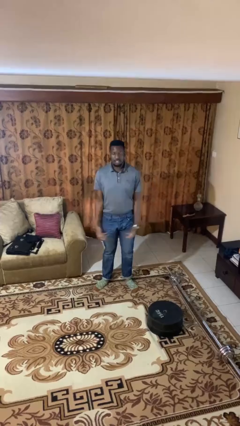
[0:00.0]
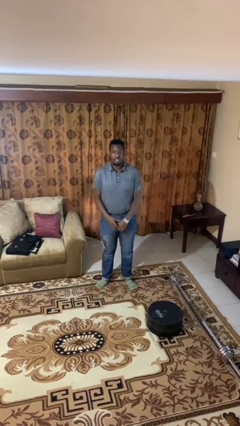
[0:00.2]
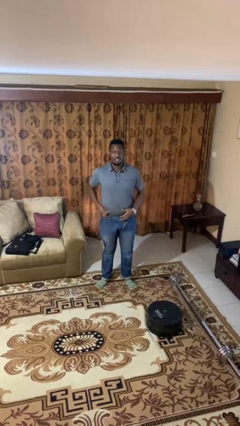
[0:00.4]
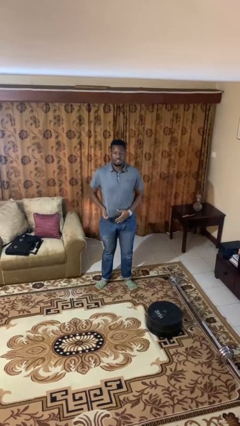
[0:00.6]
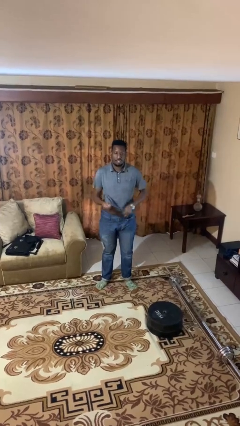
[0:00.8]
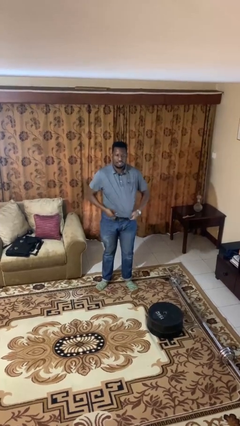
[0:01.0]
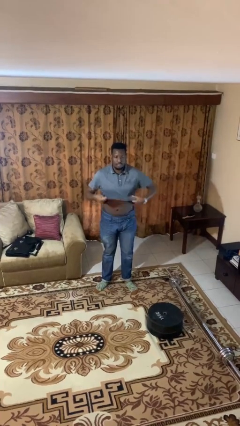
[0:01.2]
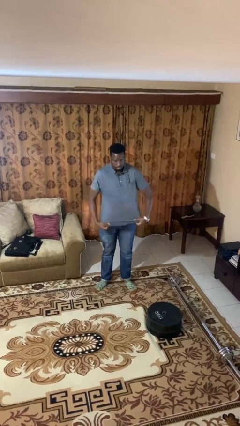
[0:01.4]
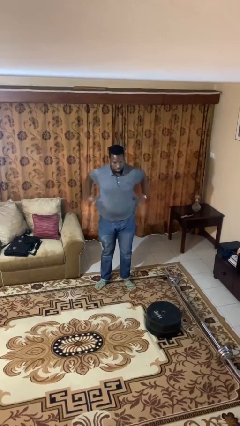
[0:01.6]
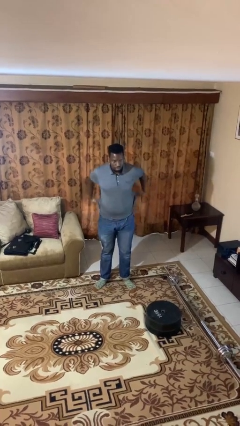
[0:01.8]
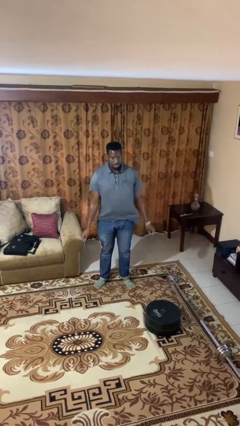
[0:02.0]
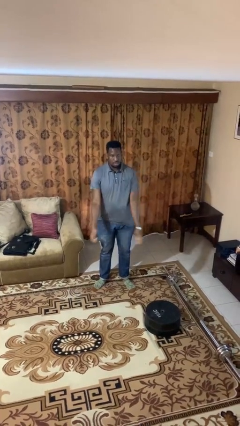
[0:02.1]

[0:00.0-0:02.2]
person untucks shirt

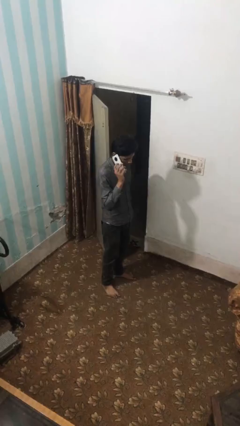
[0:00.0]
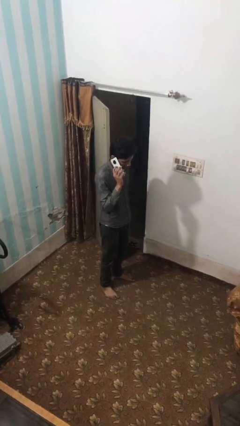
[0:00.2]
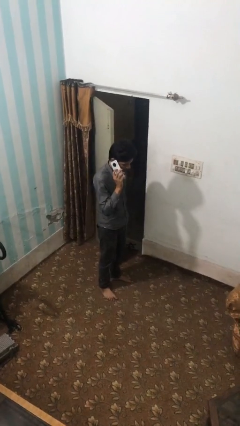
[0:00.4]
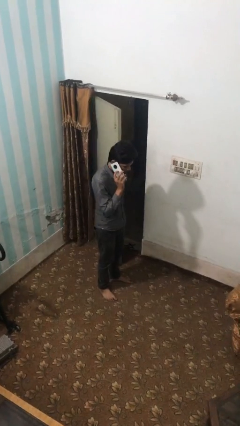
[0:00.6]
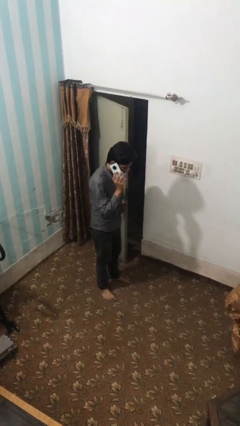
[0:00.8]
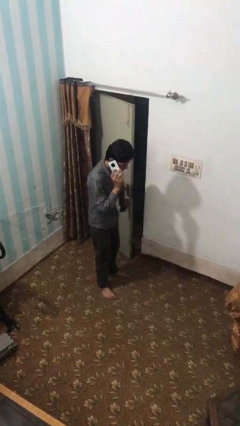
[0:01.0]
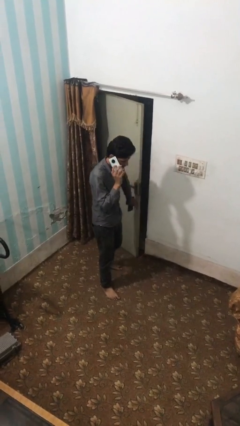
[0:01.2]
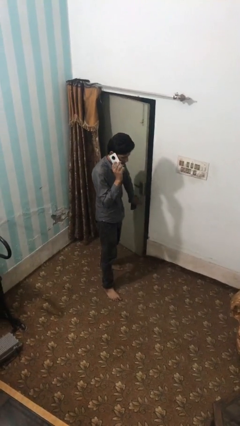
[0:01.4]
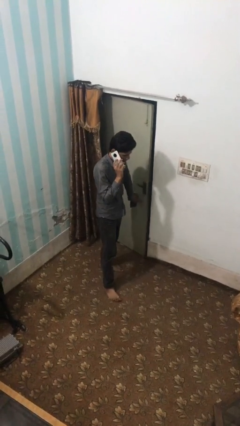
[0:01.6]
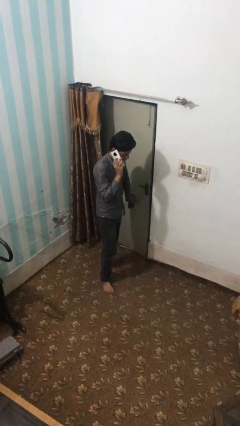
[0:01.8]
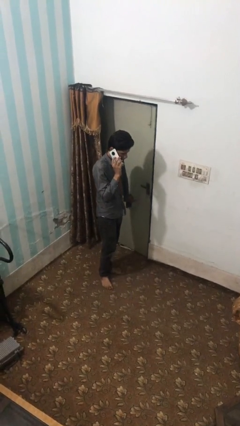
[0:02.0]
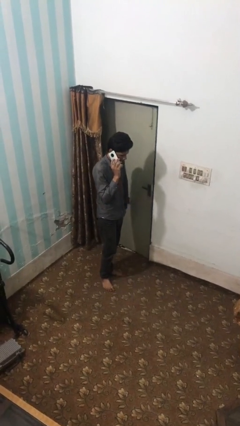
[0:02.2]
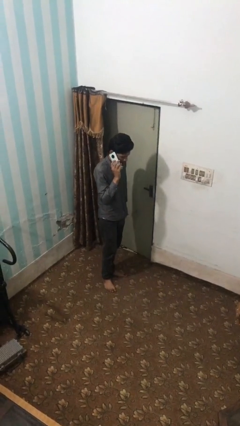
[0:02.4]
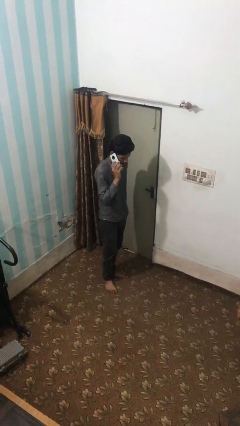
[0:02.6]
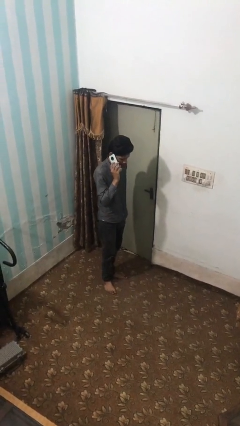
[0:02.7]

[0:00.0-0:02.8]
person closes facility door

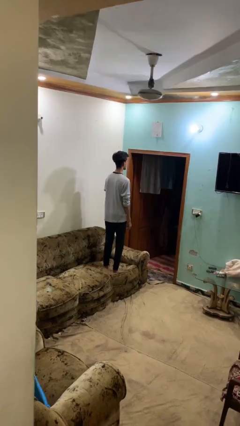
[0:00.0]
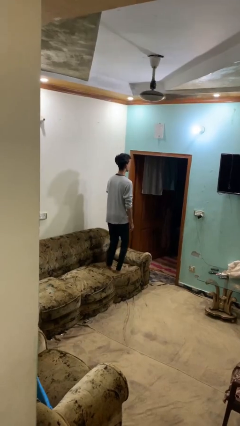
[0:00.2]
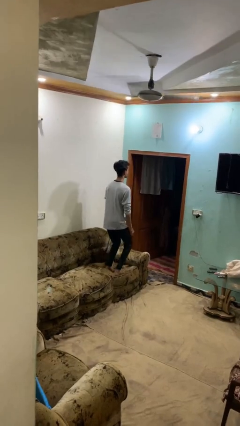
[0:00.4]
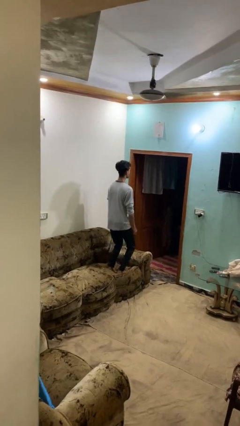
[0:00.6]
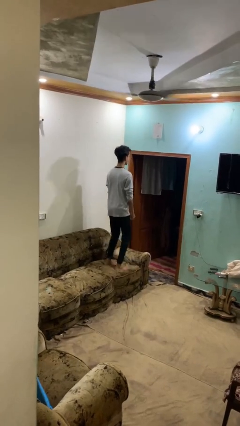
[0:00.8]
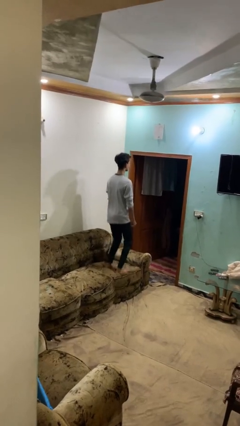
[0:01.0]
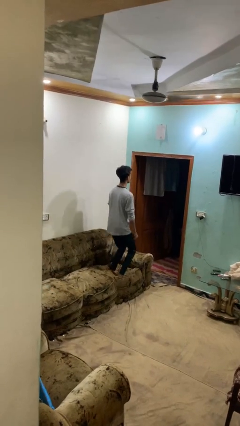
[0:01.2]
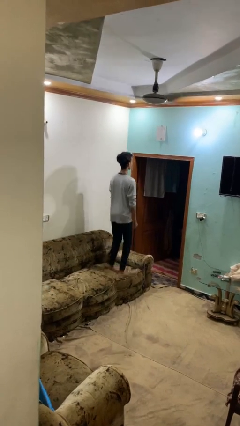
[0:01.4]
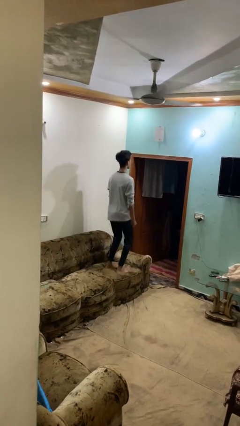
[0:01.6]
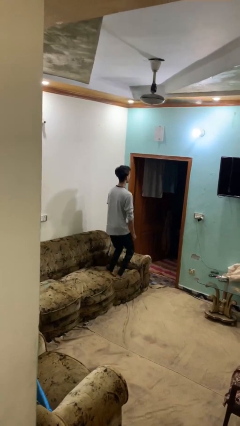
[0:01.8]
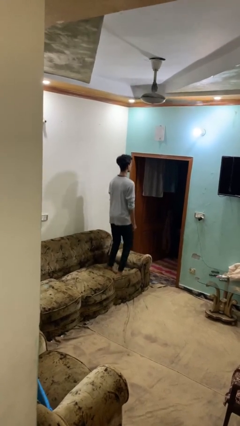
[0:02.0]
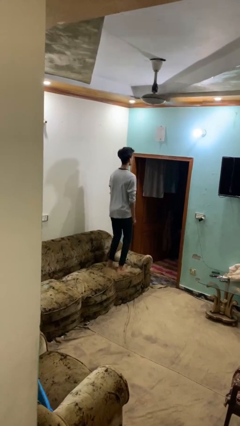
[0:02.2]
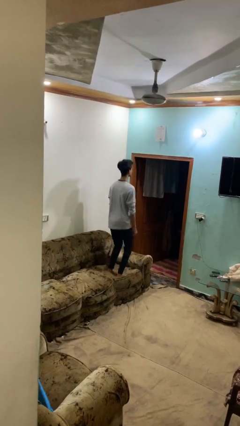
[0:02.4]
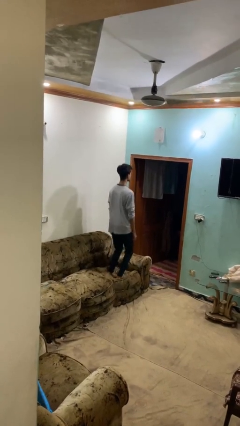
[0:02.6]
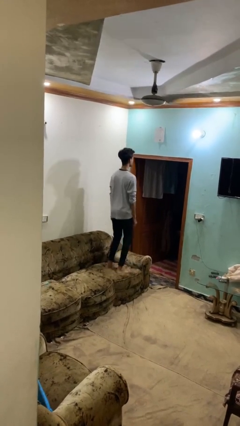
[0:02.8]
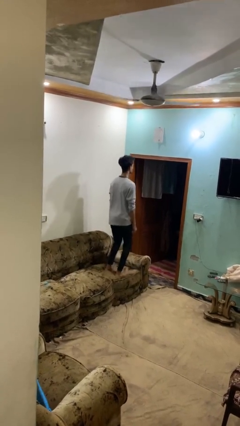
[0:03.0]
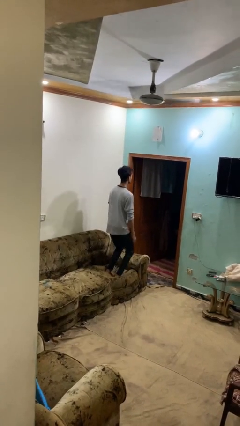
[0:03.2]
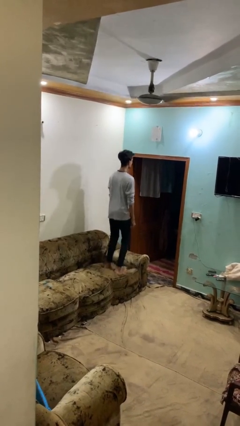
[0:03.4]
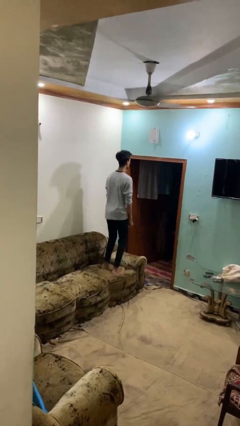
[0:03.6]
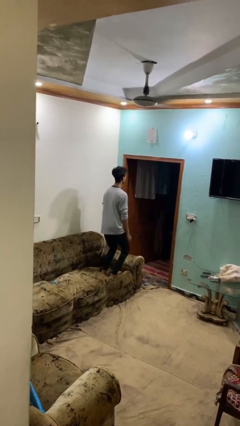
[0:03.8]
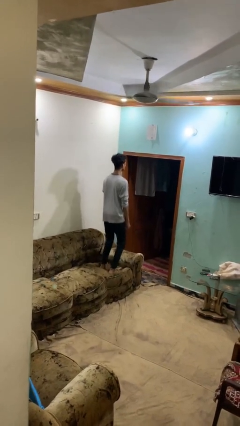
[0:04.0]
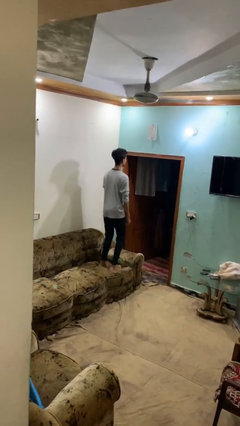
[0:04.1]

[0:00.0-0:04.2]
person jumps on couch

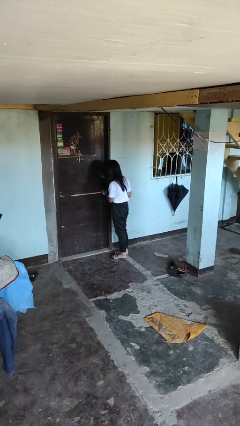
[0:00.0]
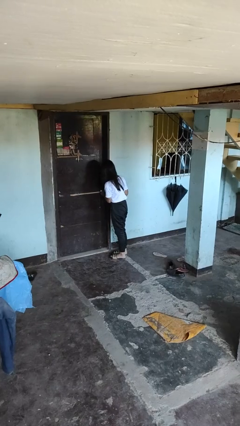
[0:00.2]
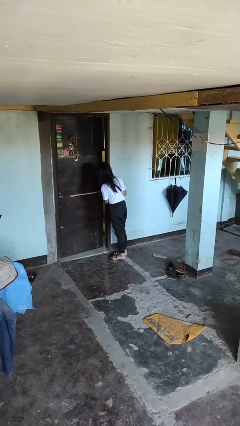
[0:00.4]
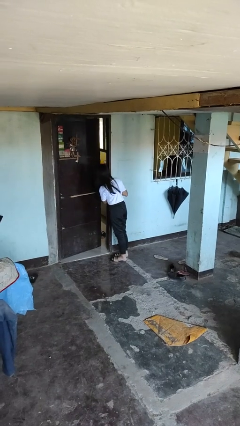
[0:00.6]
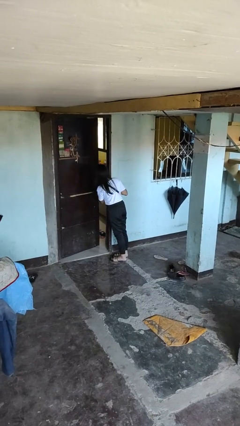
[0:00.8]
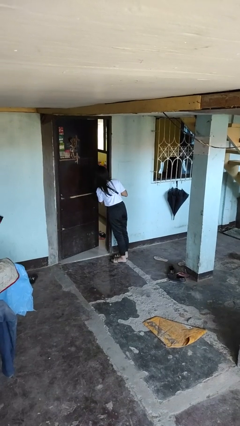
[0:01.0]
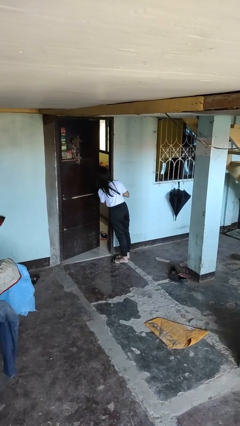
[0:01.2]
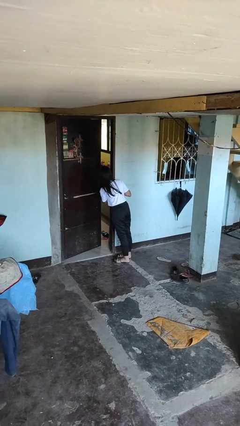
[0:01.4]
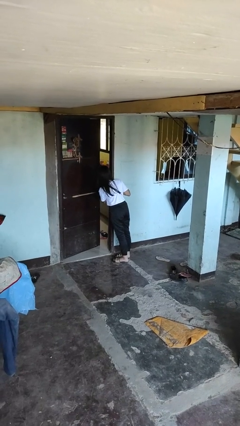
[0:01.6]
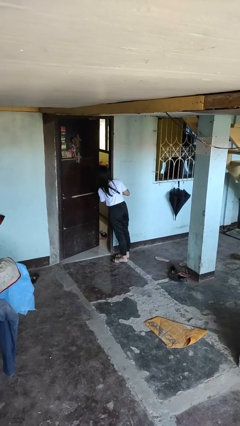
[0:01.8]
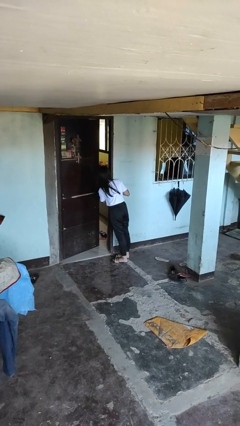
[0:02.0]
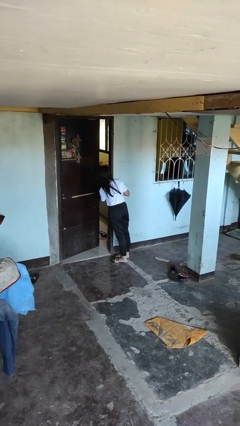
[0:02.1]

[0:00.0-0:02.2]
person opens facility door

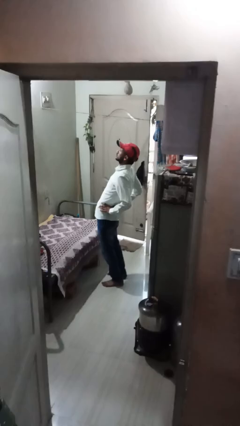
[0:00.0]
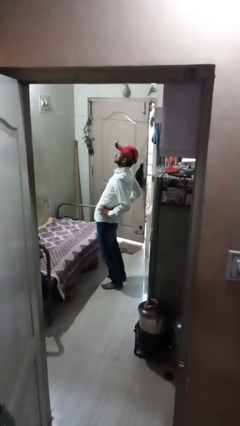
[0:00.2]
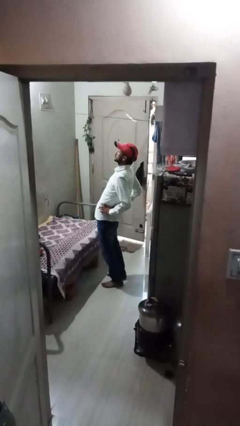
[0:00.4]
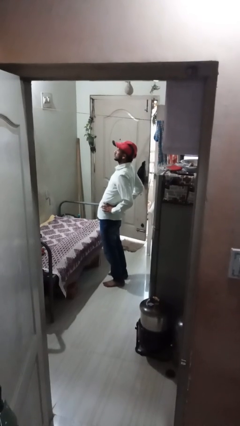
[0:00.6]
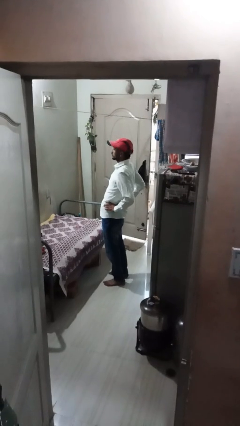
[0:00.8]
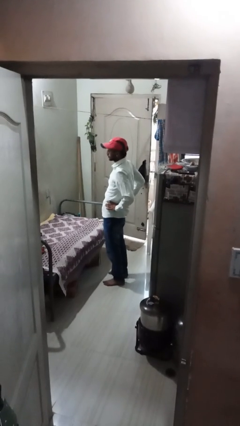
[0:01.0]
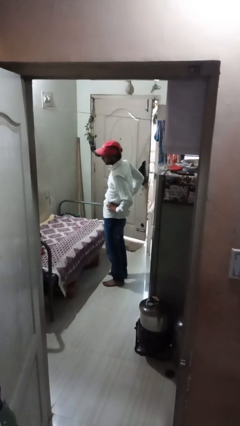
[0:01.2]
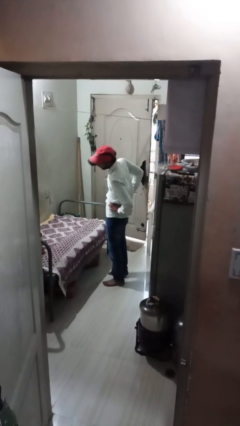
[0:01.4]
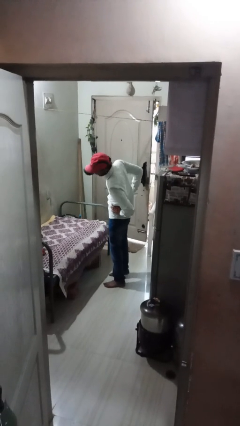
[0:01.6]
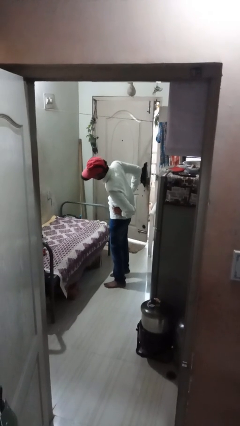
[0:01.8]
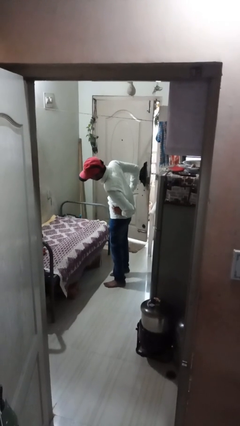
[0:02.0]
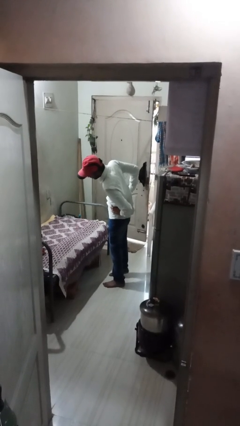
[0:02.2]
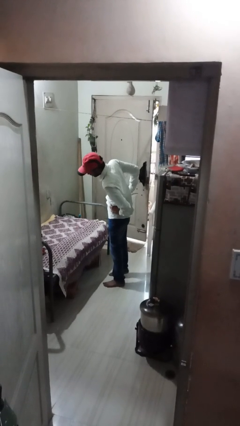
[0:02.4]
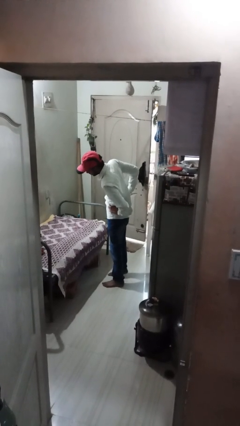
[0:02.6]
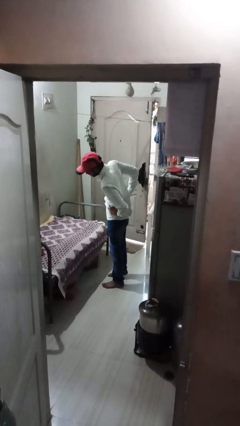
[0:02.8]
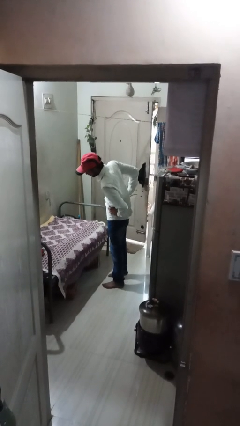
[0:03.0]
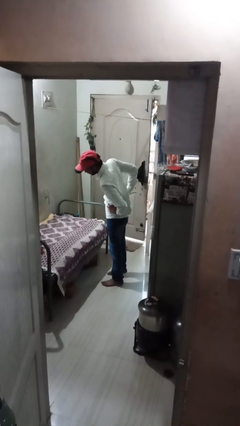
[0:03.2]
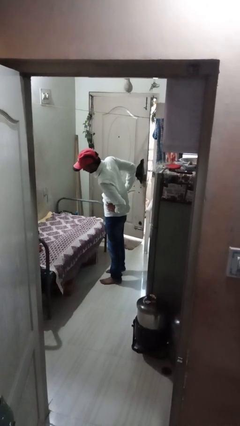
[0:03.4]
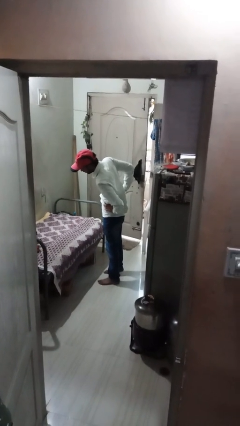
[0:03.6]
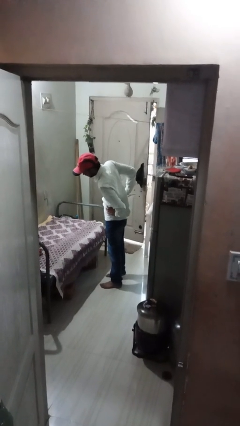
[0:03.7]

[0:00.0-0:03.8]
person stretches arms to side

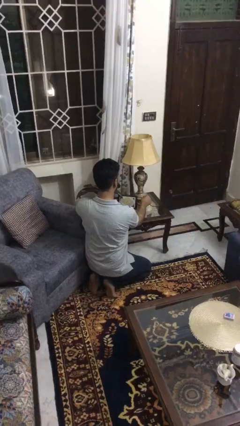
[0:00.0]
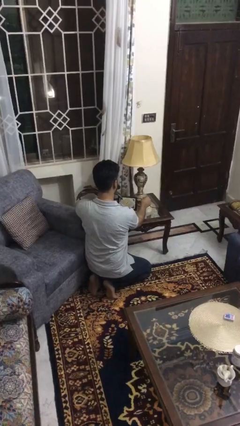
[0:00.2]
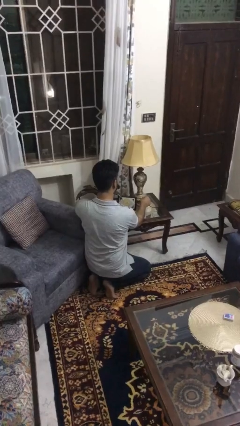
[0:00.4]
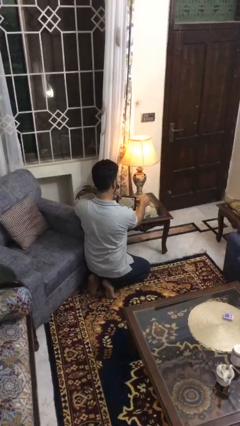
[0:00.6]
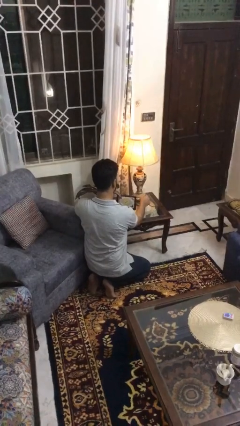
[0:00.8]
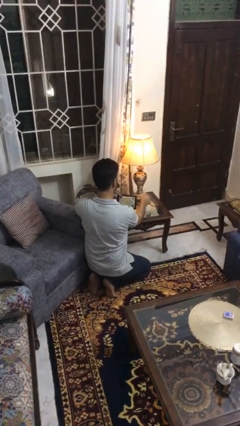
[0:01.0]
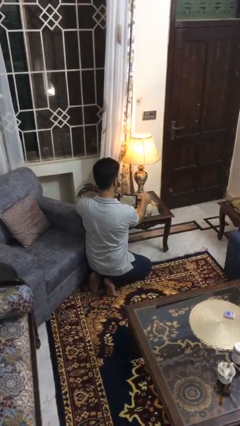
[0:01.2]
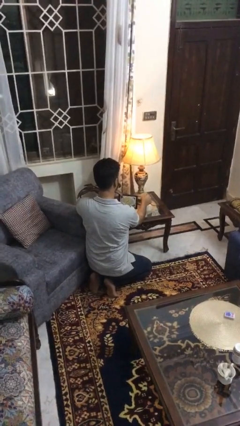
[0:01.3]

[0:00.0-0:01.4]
person turns on lamp

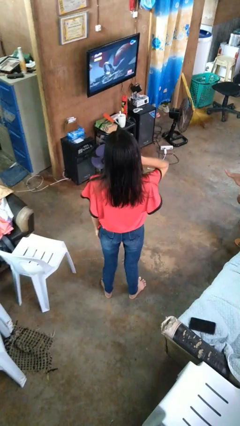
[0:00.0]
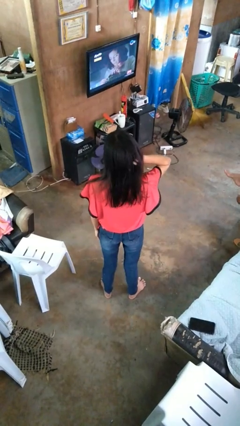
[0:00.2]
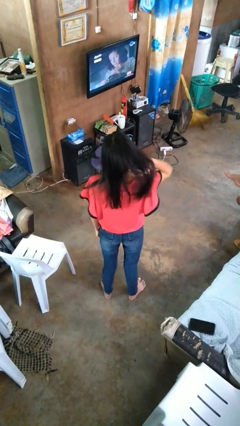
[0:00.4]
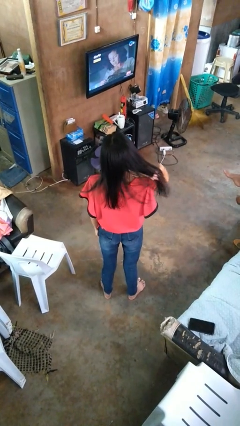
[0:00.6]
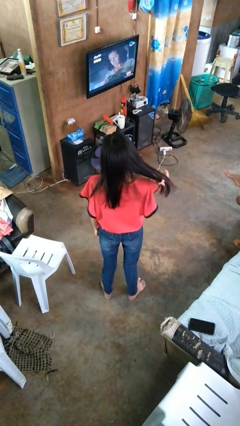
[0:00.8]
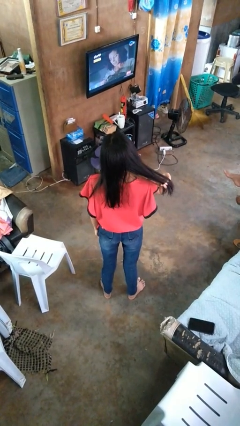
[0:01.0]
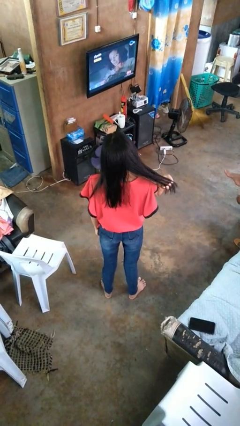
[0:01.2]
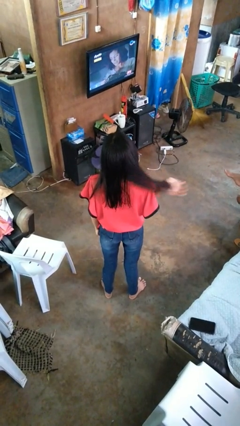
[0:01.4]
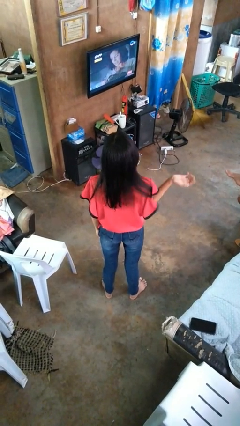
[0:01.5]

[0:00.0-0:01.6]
person strokes hair
